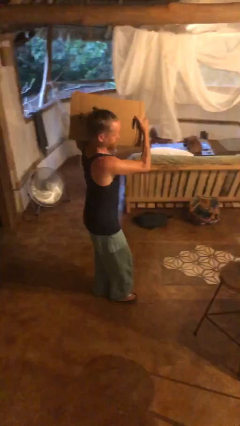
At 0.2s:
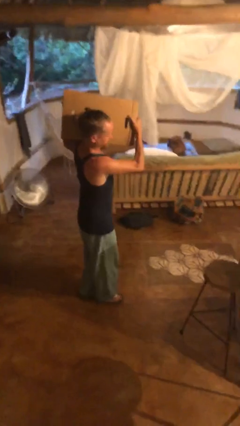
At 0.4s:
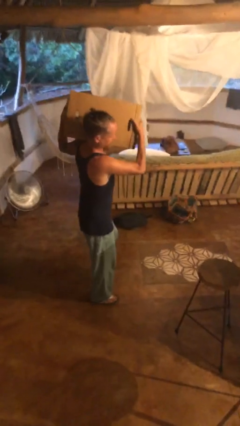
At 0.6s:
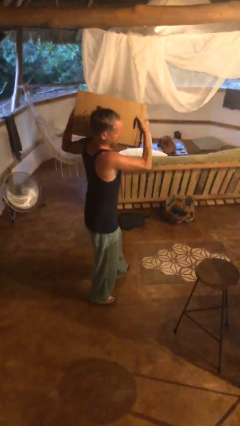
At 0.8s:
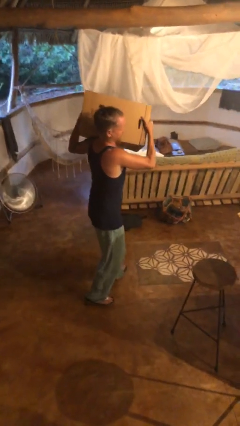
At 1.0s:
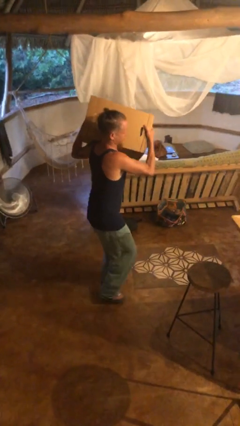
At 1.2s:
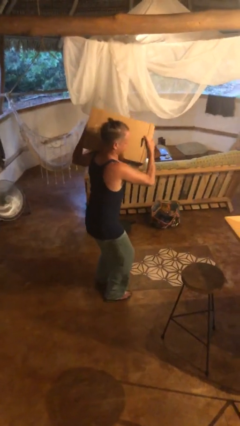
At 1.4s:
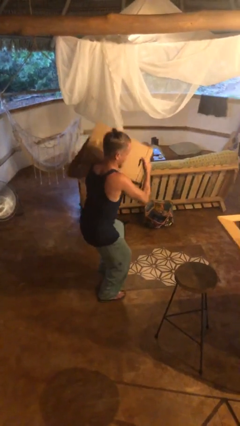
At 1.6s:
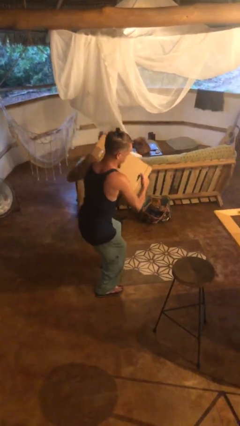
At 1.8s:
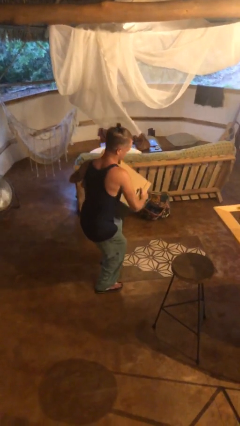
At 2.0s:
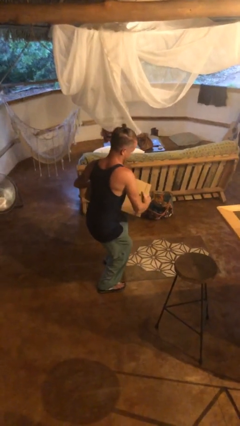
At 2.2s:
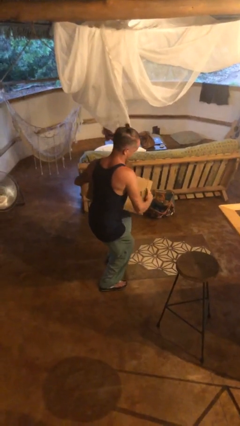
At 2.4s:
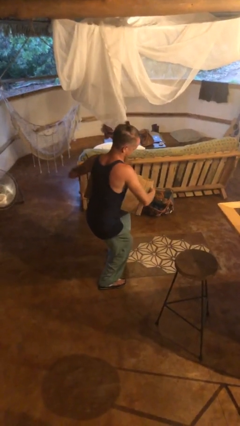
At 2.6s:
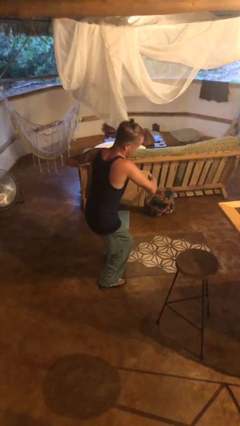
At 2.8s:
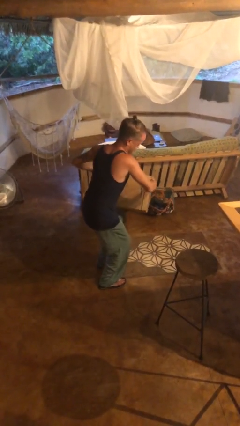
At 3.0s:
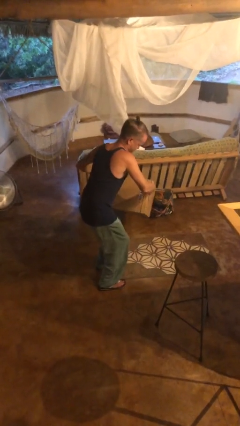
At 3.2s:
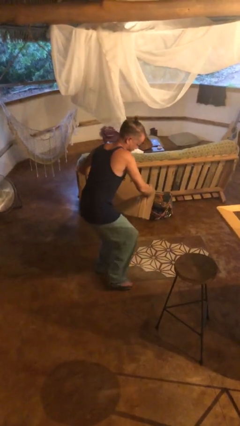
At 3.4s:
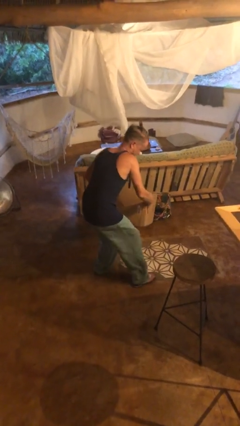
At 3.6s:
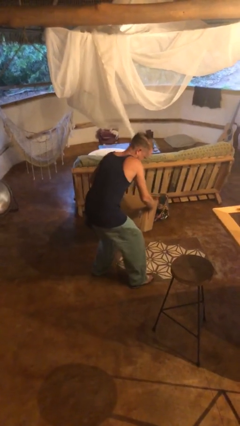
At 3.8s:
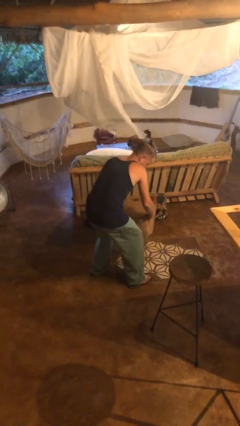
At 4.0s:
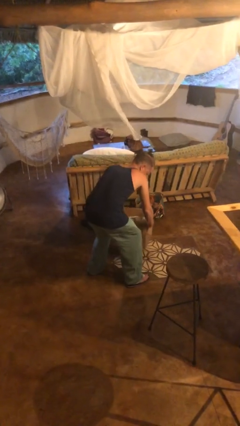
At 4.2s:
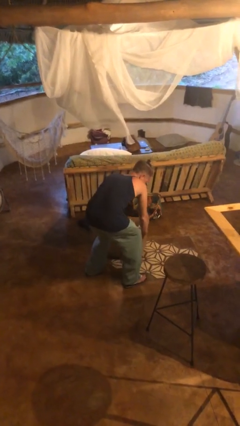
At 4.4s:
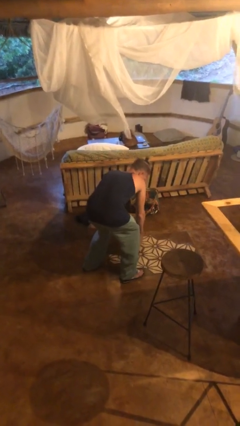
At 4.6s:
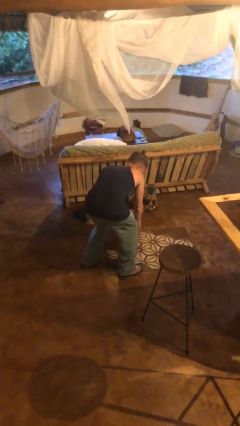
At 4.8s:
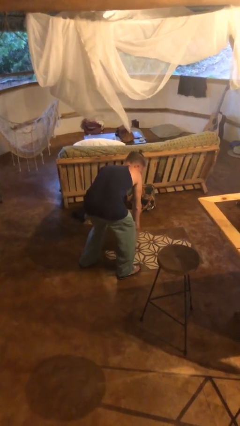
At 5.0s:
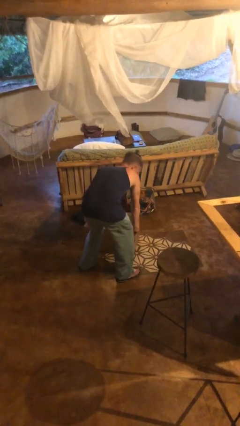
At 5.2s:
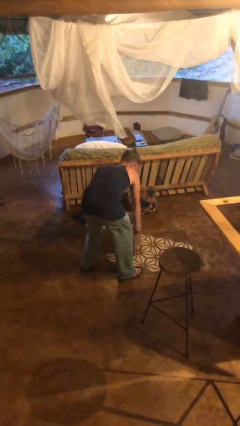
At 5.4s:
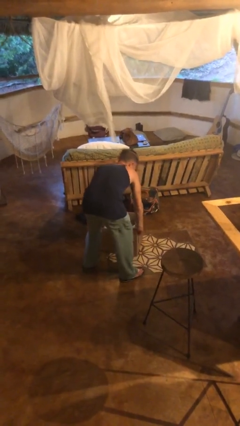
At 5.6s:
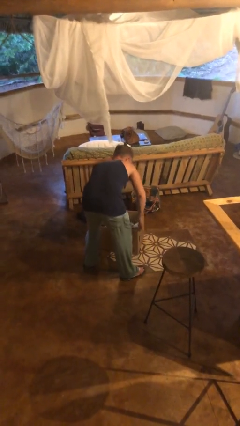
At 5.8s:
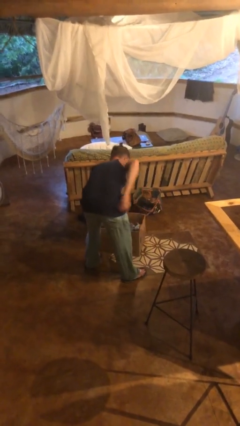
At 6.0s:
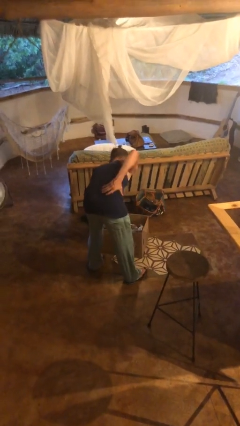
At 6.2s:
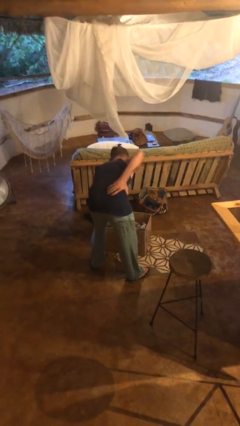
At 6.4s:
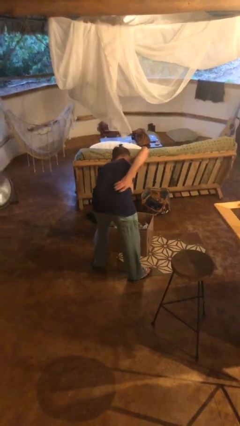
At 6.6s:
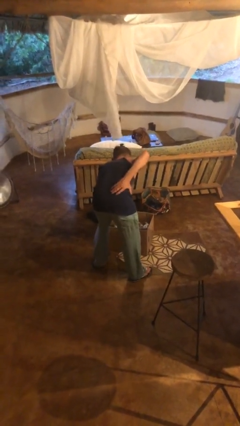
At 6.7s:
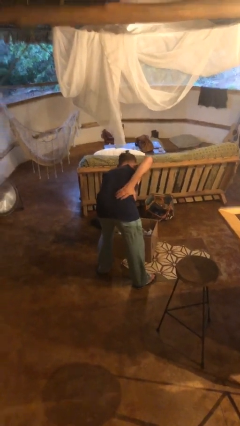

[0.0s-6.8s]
person puts down object on floor

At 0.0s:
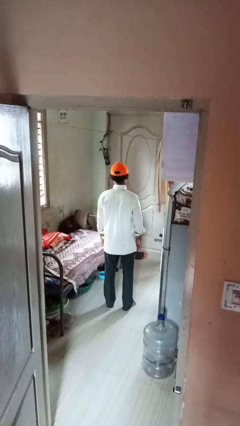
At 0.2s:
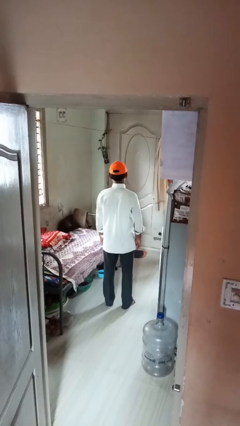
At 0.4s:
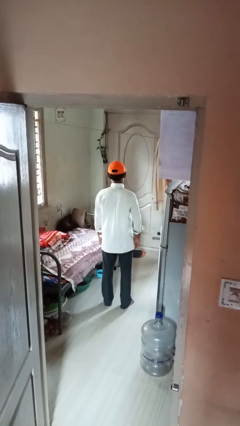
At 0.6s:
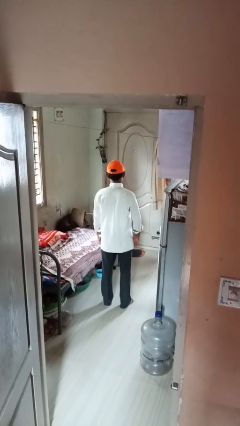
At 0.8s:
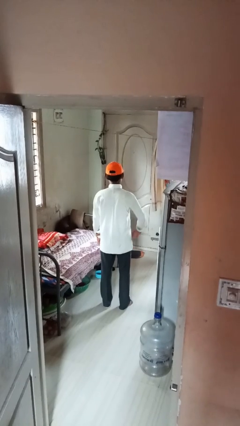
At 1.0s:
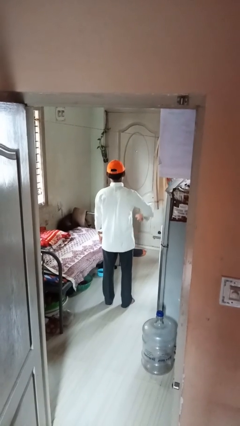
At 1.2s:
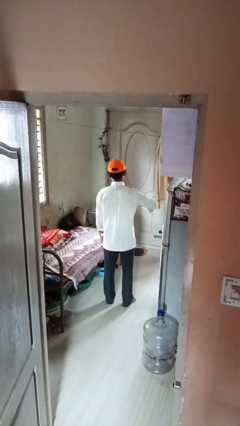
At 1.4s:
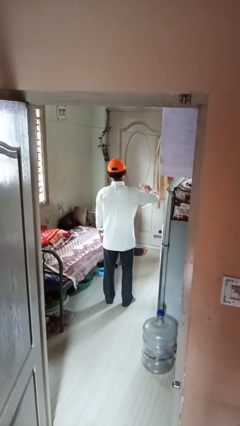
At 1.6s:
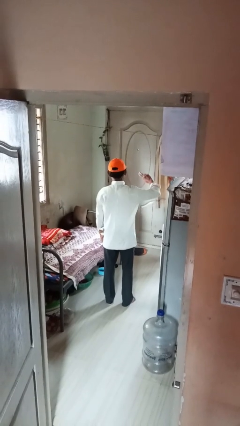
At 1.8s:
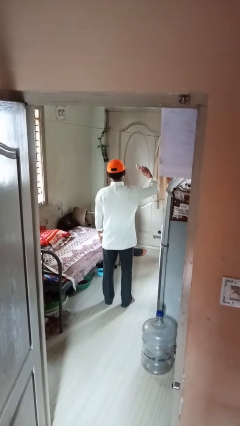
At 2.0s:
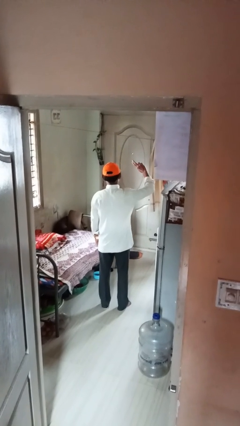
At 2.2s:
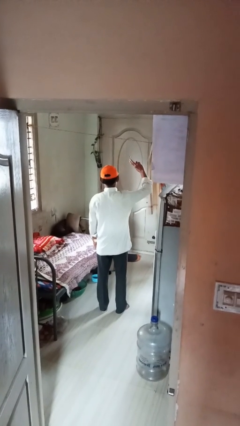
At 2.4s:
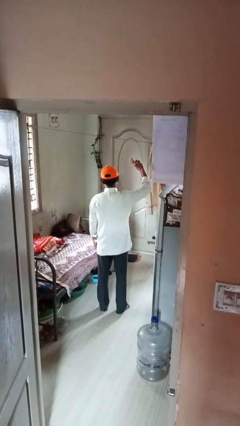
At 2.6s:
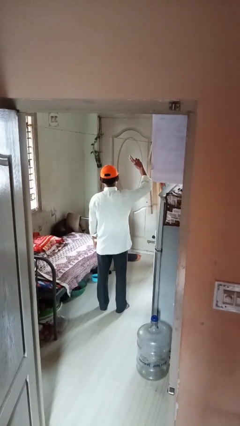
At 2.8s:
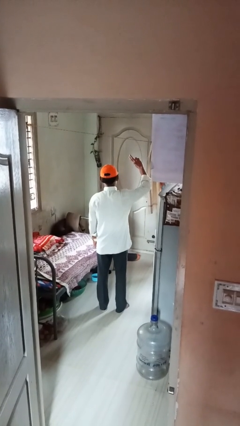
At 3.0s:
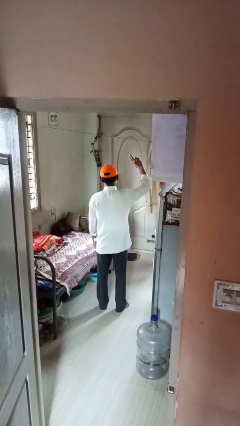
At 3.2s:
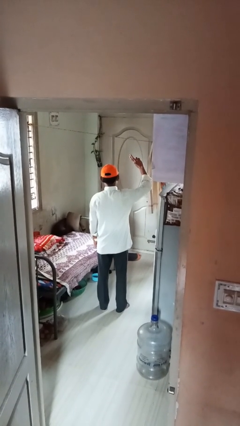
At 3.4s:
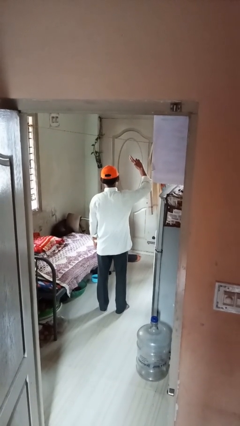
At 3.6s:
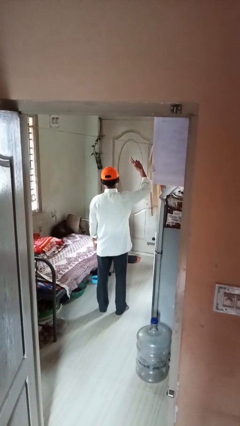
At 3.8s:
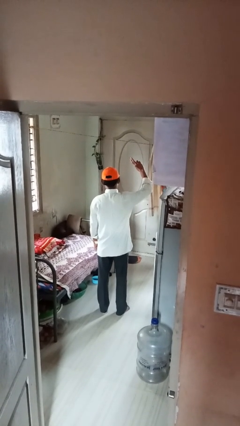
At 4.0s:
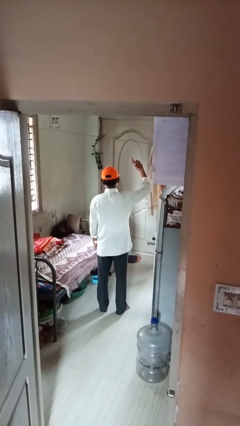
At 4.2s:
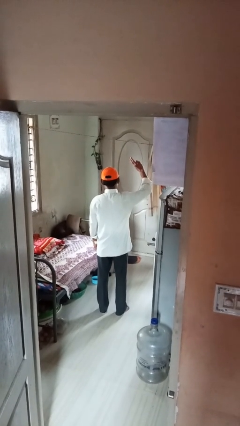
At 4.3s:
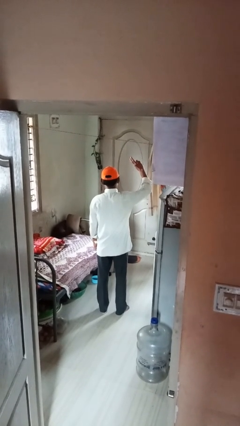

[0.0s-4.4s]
person gestures swipe up

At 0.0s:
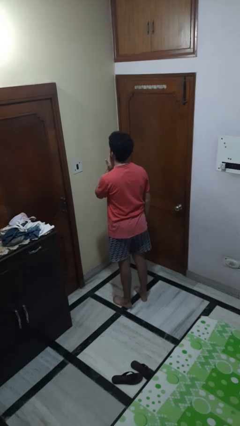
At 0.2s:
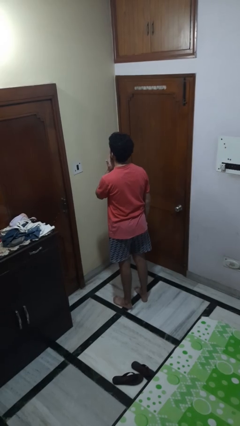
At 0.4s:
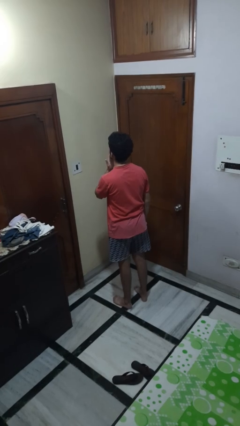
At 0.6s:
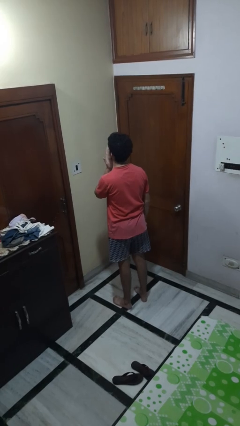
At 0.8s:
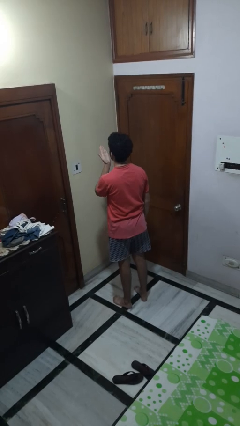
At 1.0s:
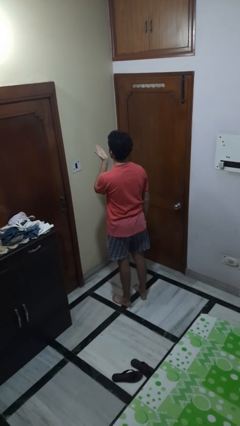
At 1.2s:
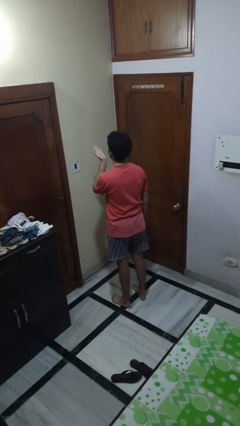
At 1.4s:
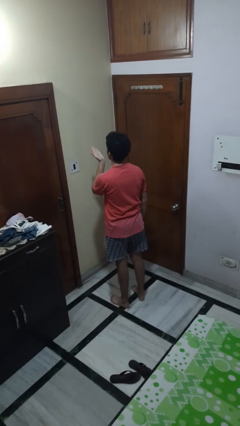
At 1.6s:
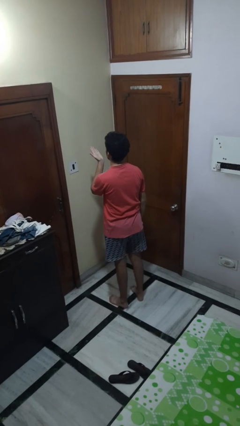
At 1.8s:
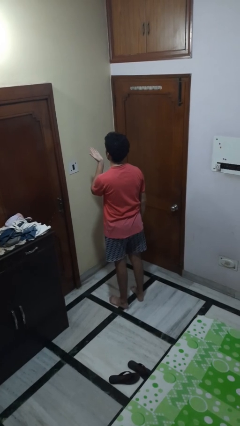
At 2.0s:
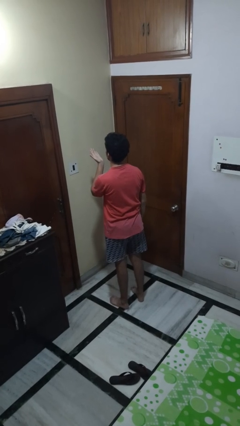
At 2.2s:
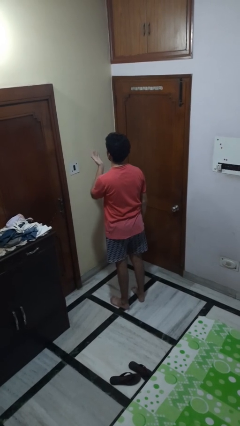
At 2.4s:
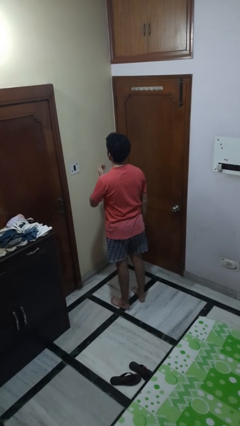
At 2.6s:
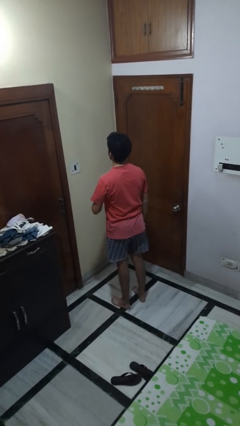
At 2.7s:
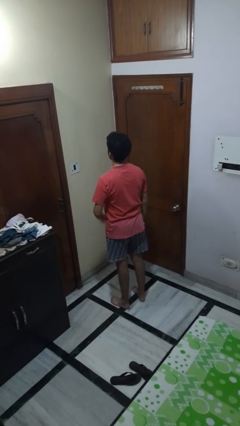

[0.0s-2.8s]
person gestures blow kiss

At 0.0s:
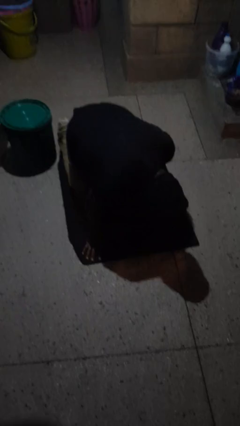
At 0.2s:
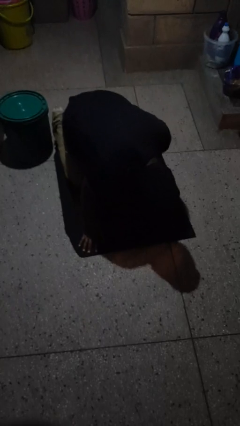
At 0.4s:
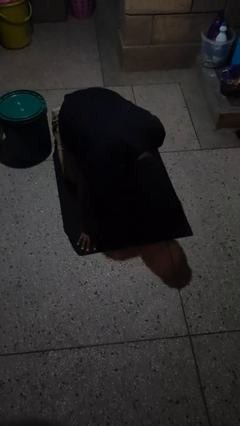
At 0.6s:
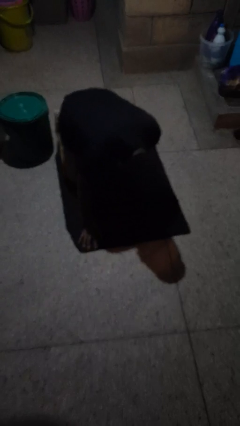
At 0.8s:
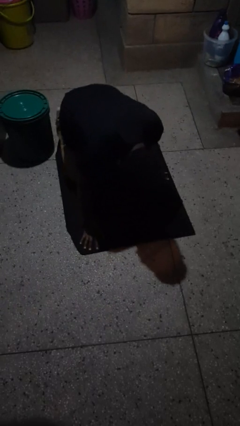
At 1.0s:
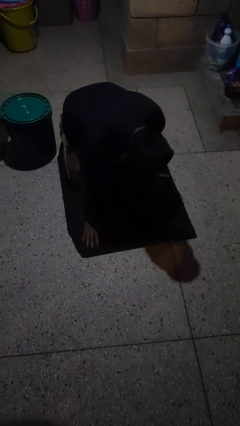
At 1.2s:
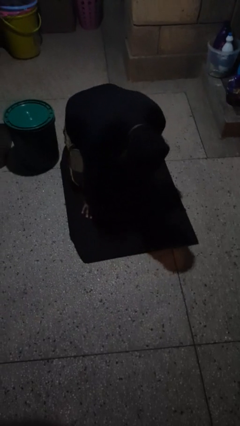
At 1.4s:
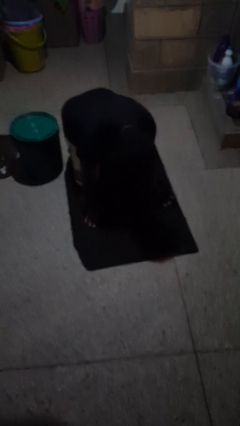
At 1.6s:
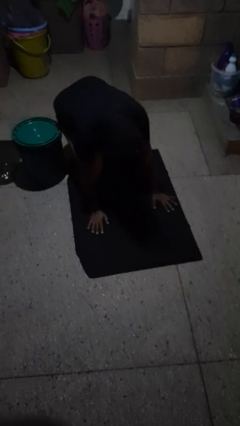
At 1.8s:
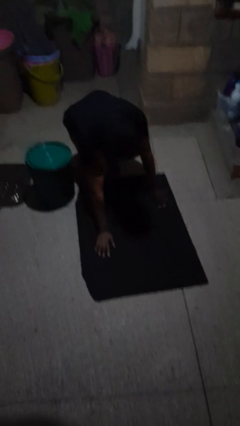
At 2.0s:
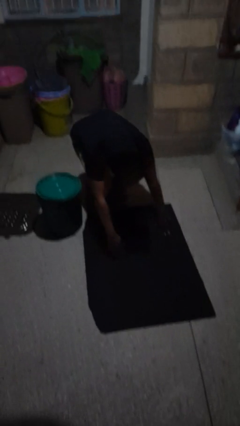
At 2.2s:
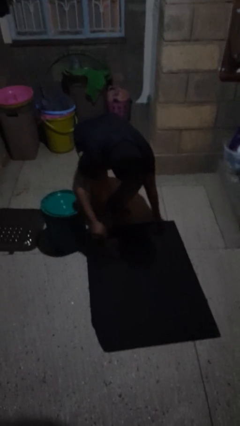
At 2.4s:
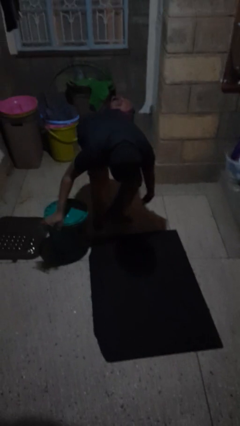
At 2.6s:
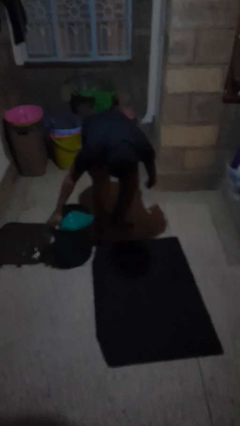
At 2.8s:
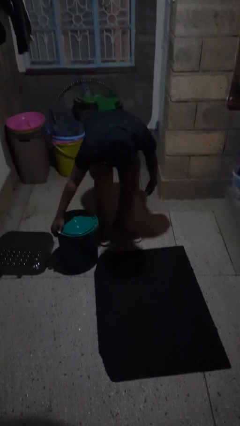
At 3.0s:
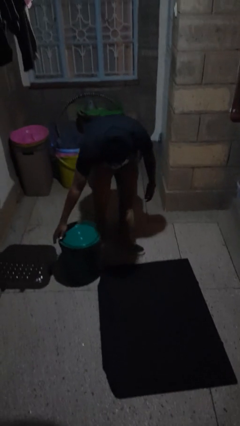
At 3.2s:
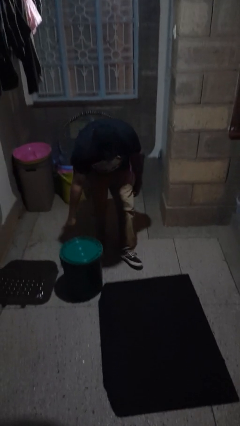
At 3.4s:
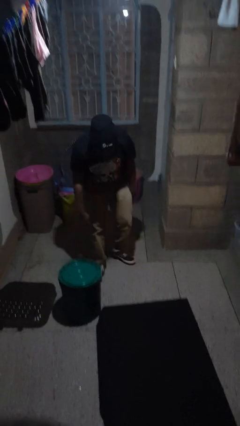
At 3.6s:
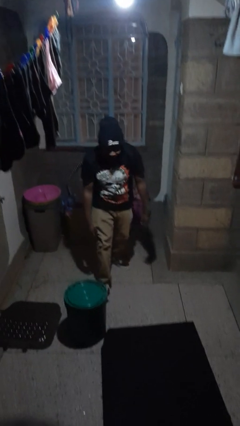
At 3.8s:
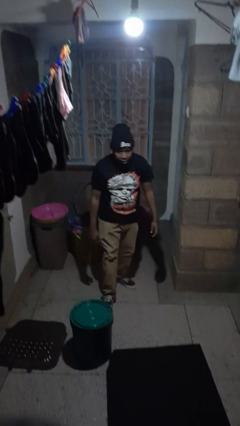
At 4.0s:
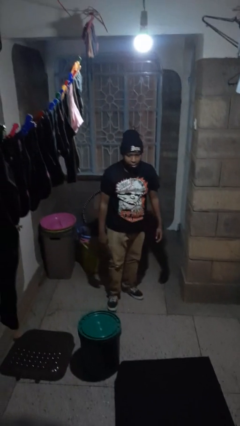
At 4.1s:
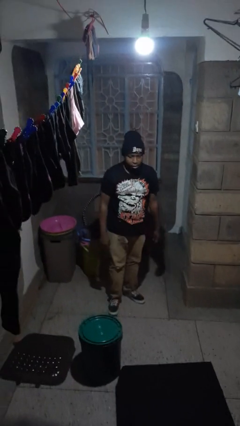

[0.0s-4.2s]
person stands up from floor
